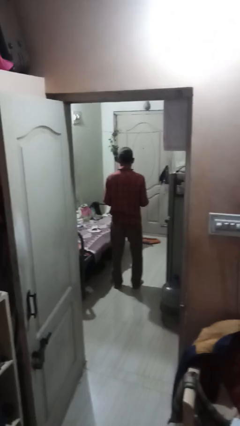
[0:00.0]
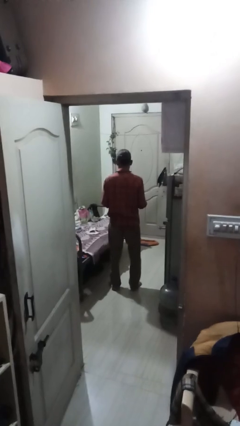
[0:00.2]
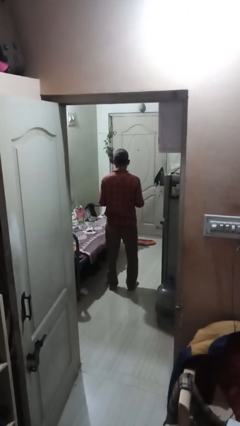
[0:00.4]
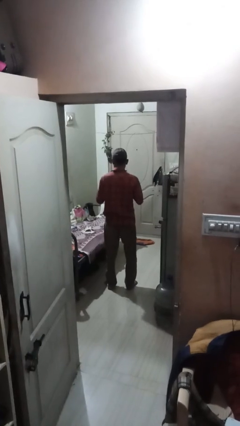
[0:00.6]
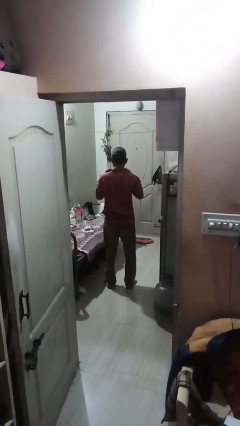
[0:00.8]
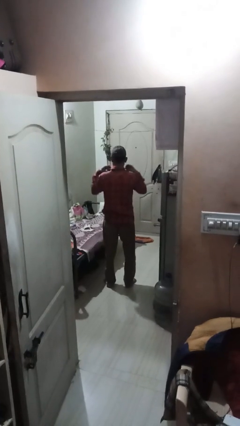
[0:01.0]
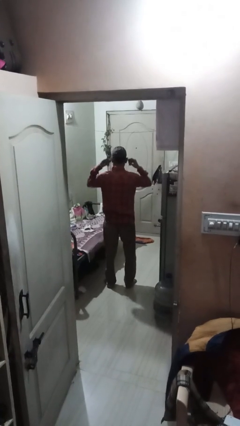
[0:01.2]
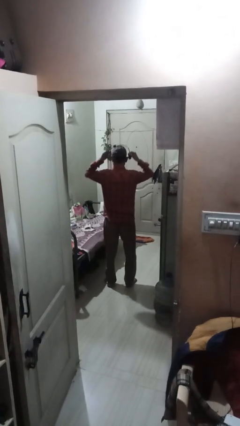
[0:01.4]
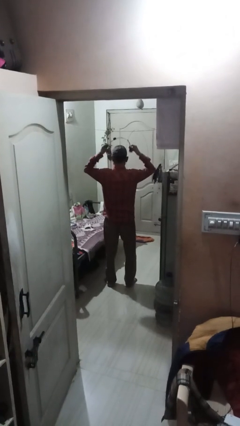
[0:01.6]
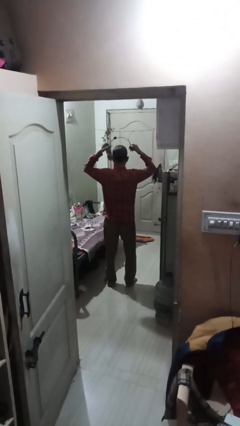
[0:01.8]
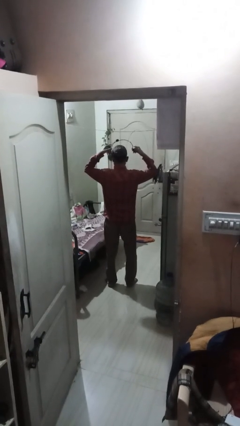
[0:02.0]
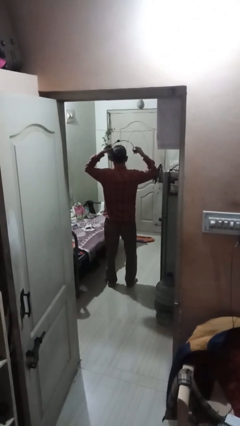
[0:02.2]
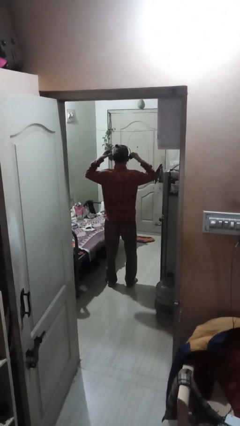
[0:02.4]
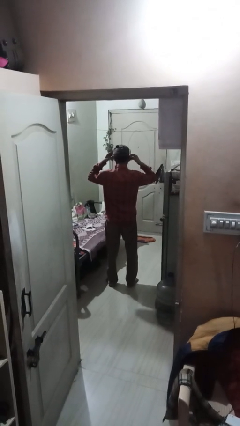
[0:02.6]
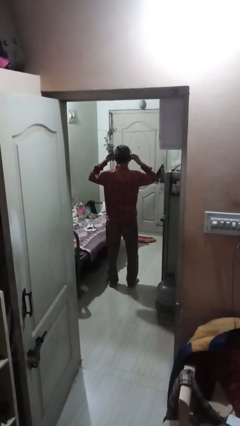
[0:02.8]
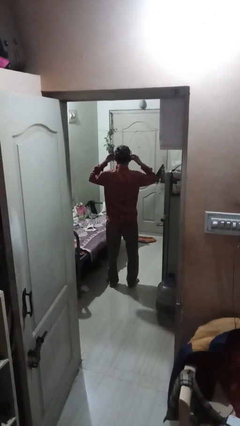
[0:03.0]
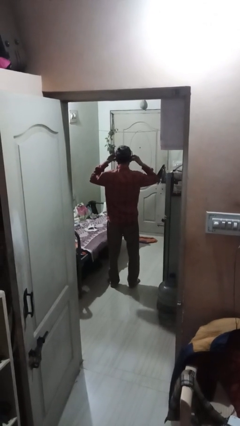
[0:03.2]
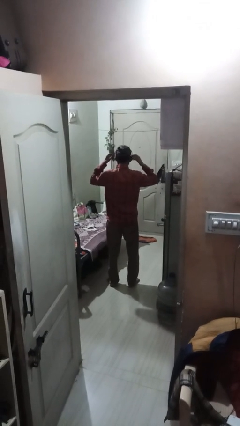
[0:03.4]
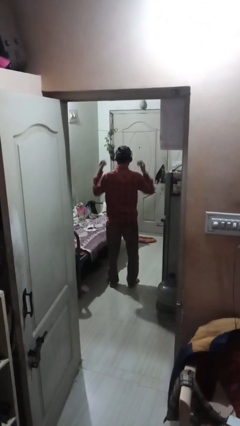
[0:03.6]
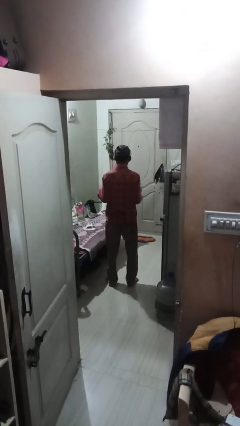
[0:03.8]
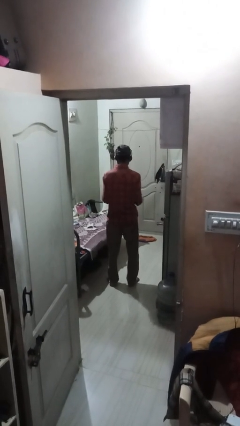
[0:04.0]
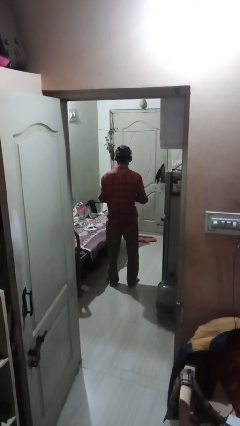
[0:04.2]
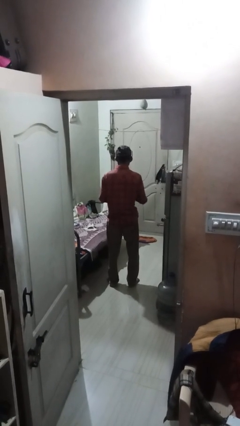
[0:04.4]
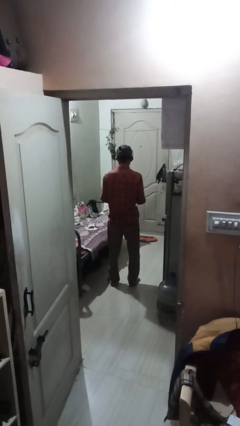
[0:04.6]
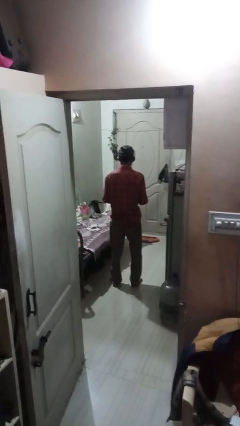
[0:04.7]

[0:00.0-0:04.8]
person puts on headphones

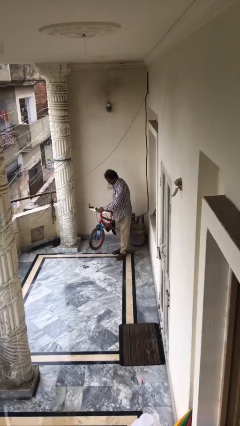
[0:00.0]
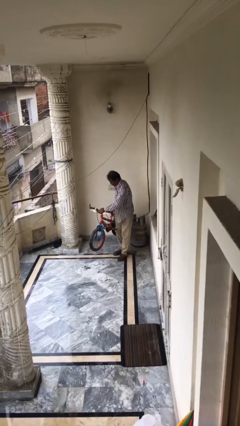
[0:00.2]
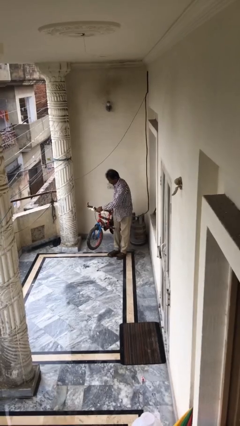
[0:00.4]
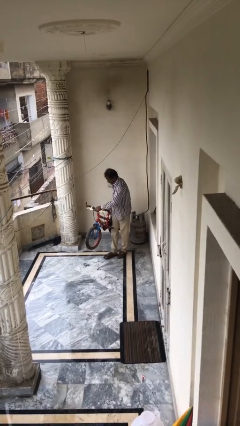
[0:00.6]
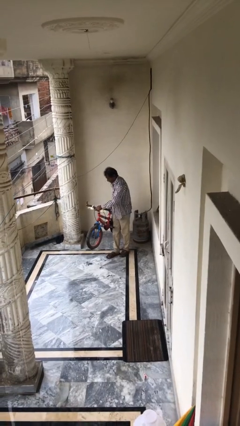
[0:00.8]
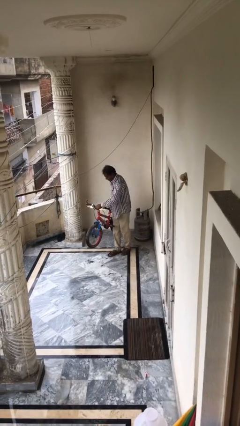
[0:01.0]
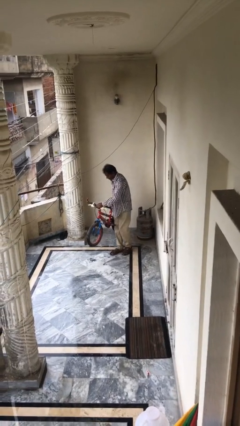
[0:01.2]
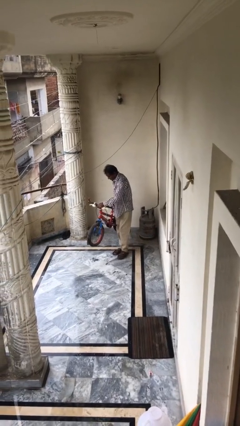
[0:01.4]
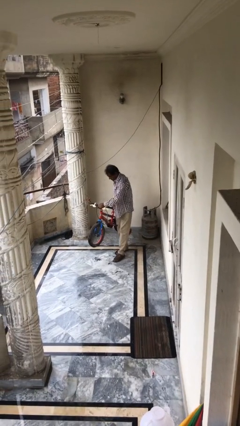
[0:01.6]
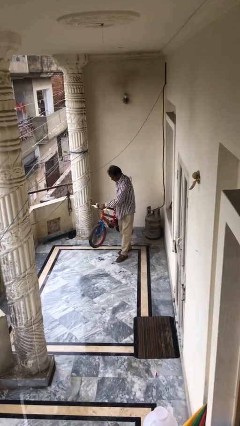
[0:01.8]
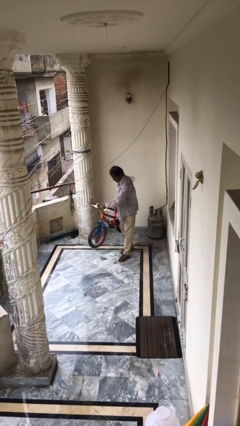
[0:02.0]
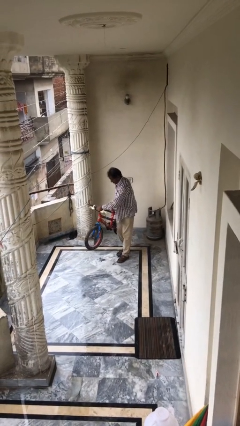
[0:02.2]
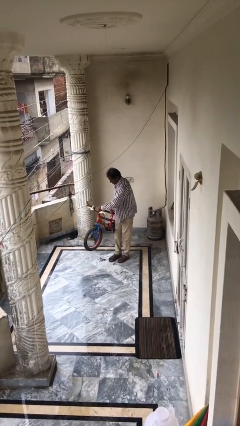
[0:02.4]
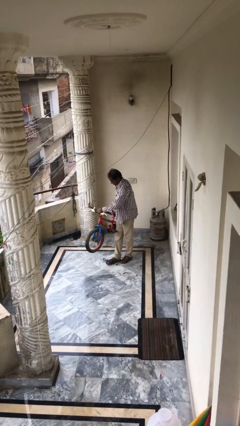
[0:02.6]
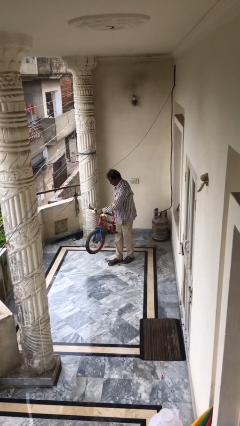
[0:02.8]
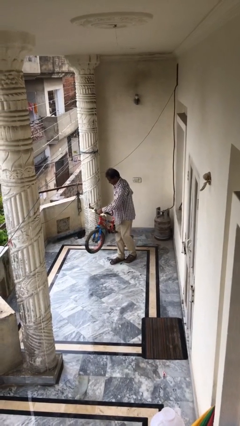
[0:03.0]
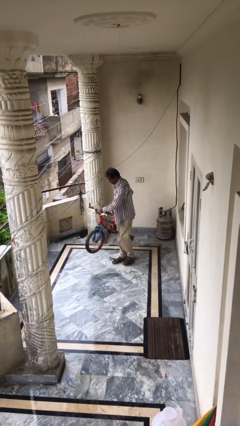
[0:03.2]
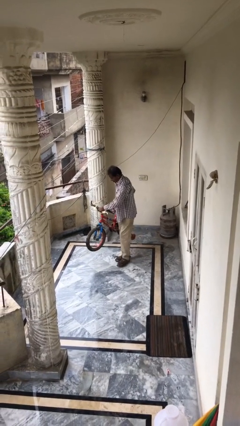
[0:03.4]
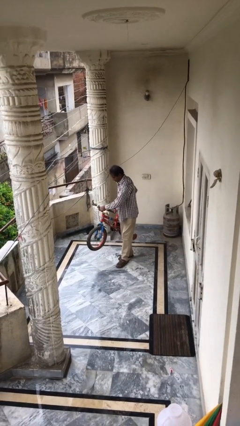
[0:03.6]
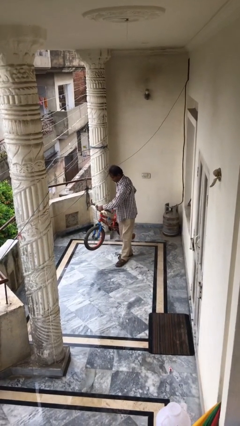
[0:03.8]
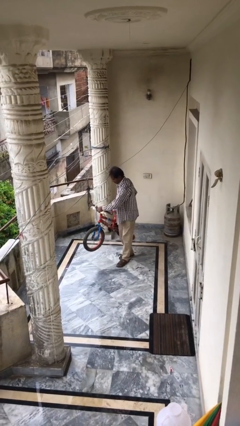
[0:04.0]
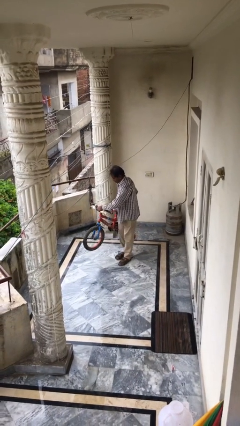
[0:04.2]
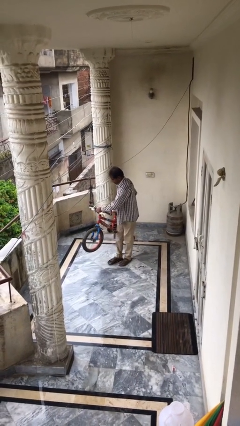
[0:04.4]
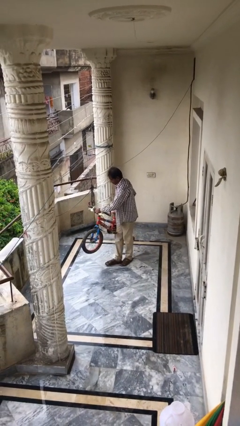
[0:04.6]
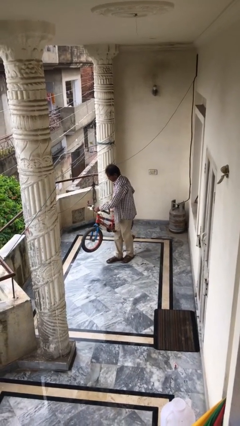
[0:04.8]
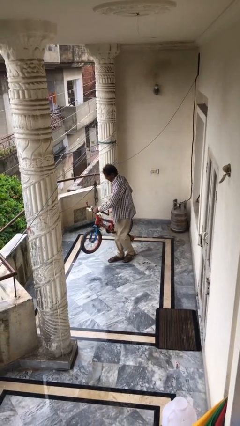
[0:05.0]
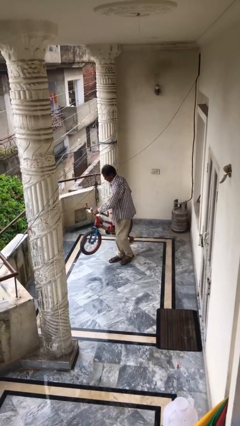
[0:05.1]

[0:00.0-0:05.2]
person carries heavy object

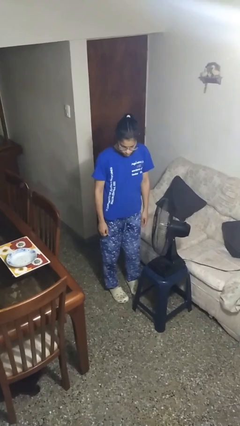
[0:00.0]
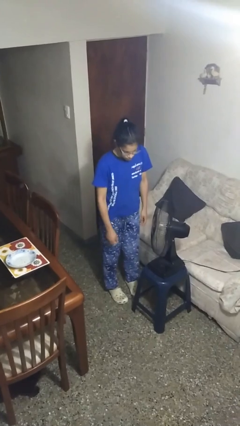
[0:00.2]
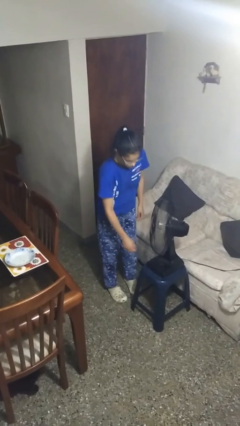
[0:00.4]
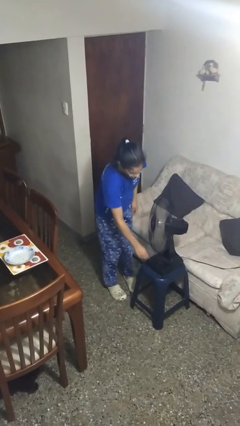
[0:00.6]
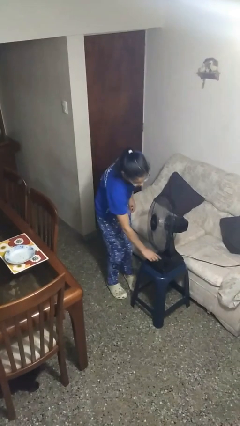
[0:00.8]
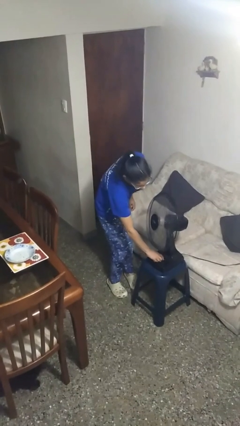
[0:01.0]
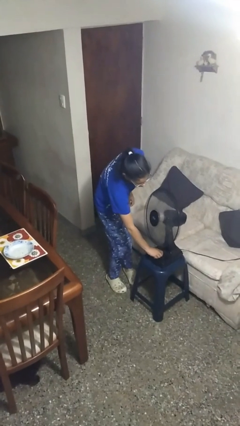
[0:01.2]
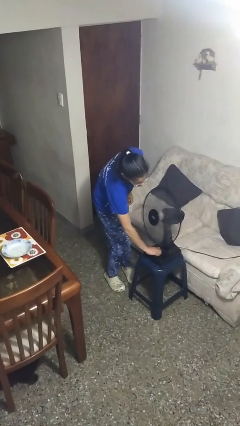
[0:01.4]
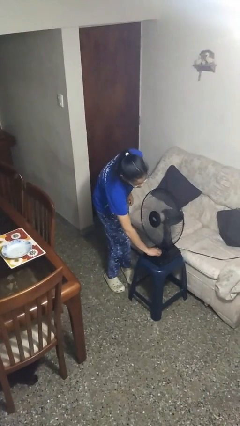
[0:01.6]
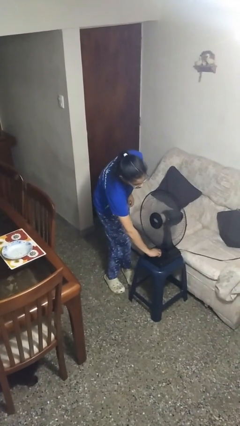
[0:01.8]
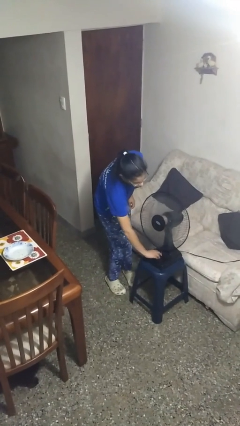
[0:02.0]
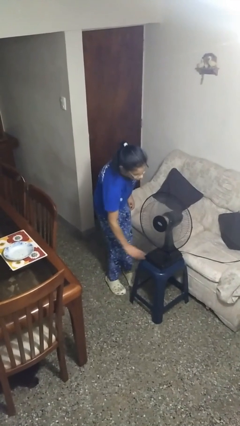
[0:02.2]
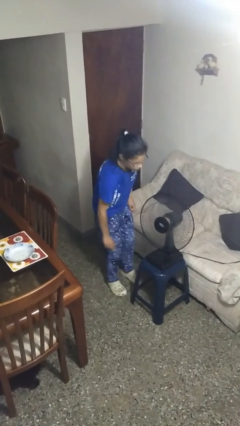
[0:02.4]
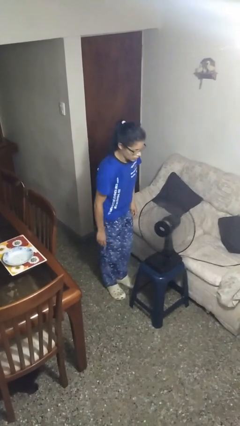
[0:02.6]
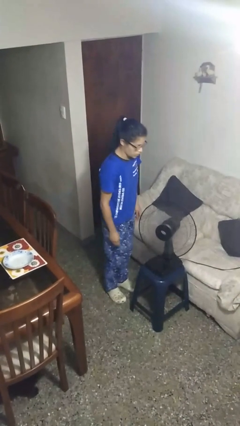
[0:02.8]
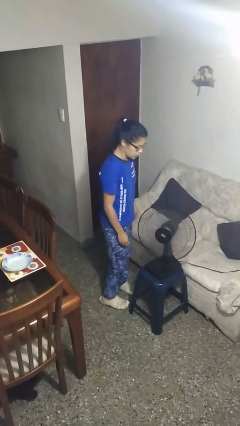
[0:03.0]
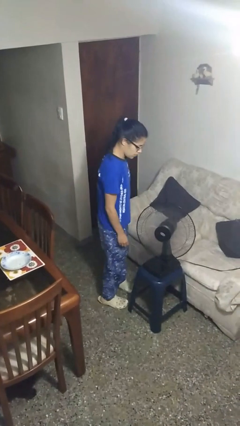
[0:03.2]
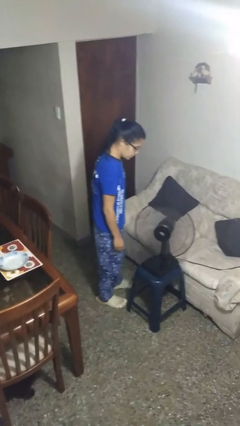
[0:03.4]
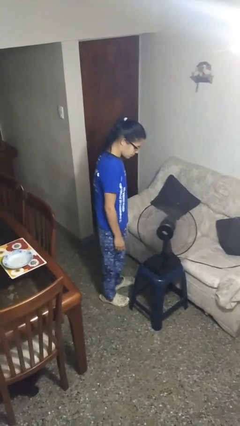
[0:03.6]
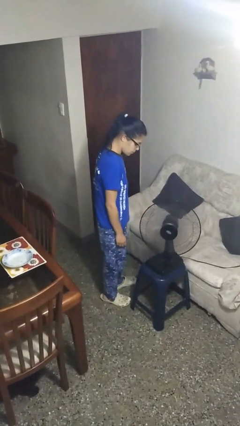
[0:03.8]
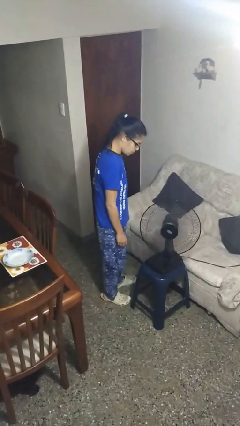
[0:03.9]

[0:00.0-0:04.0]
person turns off fan

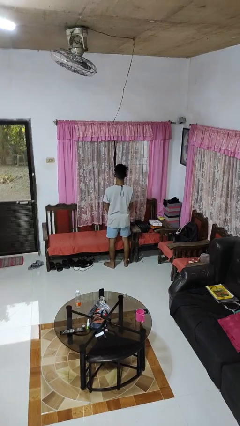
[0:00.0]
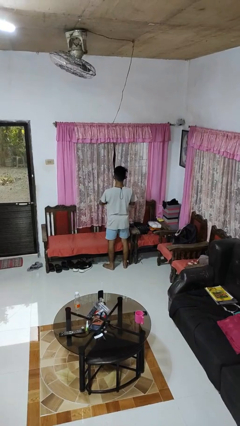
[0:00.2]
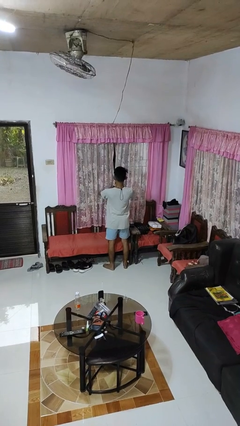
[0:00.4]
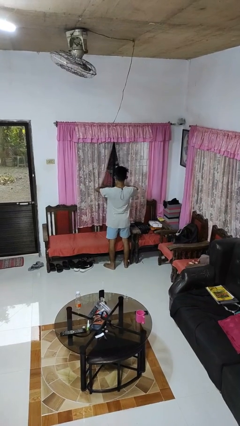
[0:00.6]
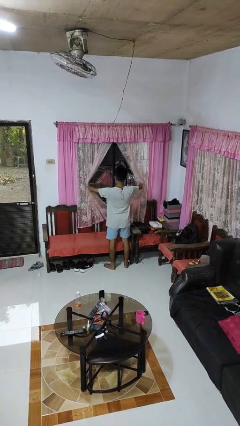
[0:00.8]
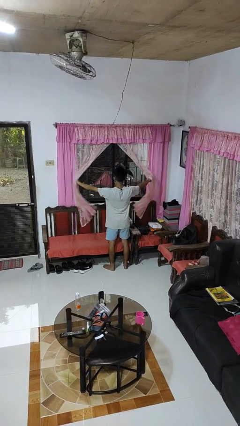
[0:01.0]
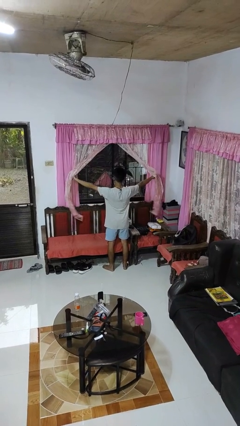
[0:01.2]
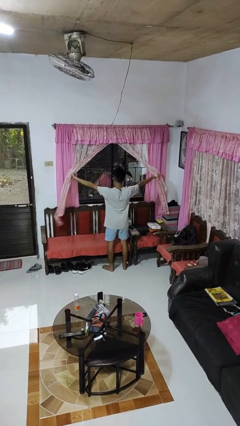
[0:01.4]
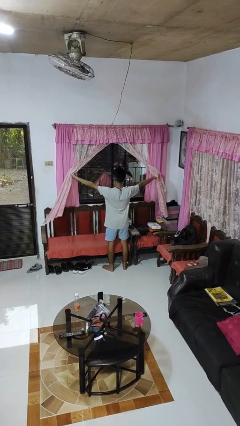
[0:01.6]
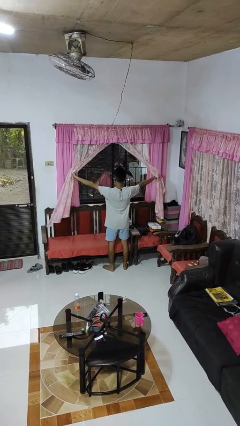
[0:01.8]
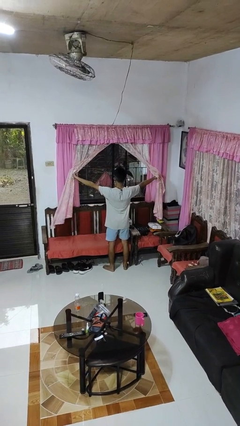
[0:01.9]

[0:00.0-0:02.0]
person opens curtains

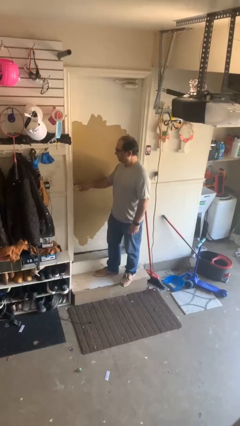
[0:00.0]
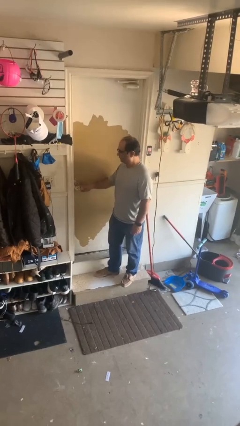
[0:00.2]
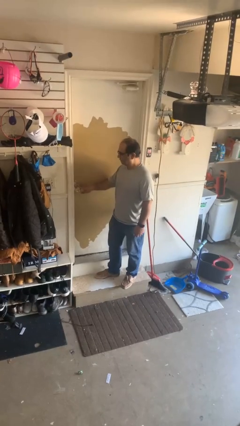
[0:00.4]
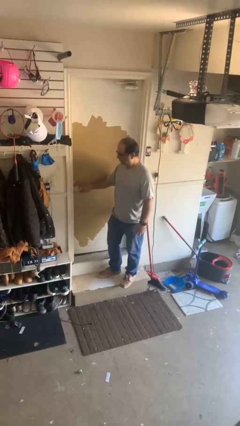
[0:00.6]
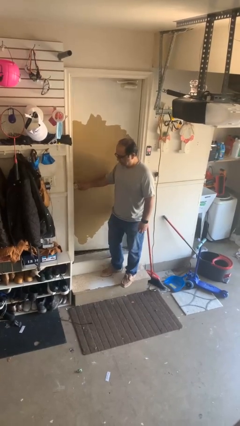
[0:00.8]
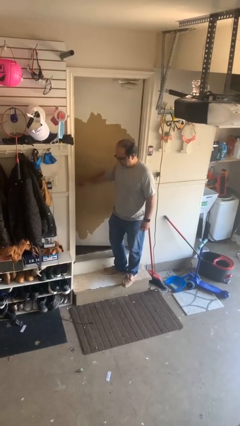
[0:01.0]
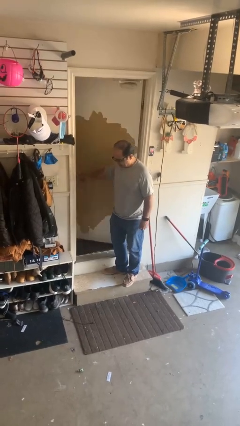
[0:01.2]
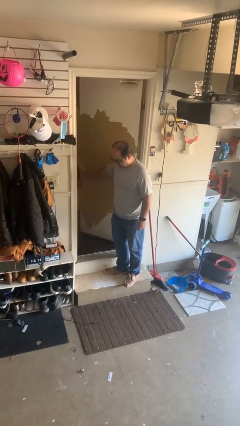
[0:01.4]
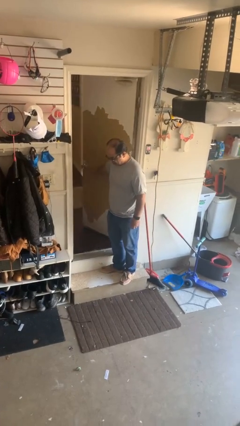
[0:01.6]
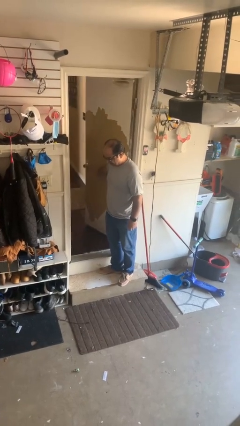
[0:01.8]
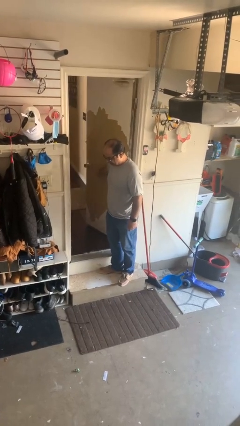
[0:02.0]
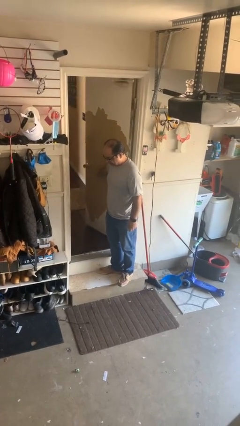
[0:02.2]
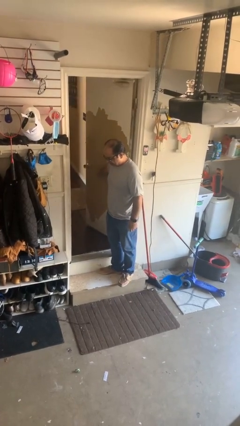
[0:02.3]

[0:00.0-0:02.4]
person opens facility door
